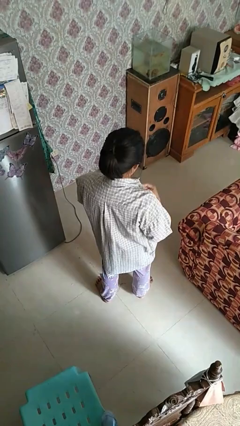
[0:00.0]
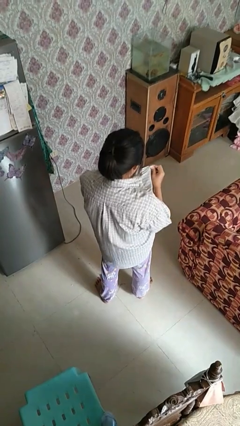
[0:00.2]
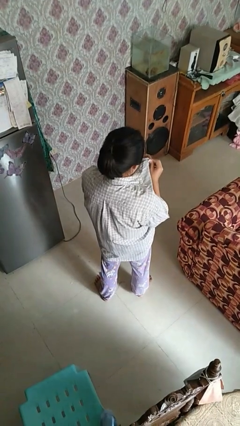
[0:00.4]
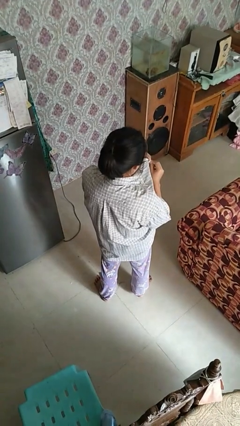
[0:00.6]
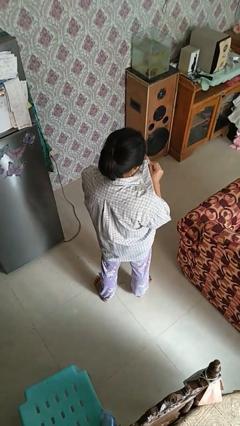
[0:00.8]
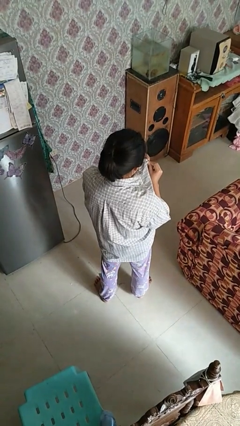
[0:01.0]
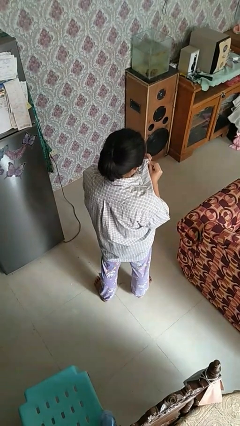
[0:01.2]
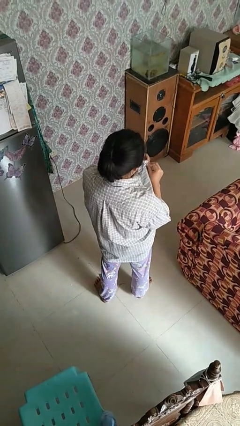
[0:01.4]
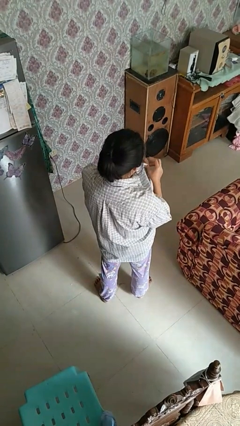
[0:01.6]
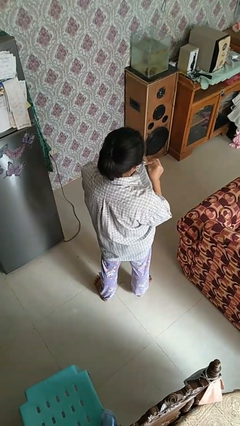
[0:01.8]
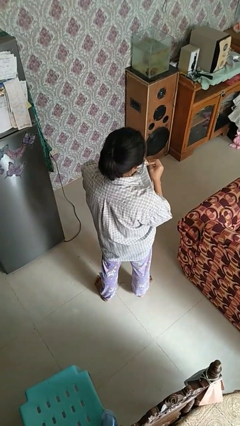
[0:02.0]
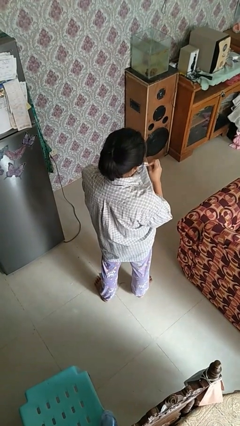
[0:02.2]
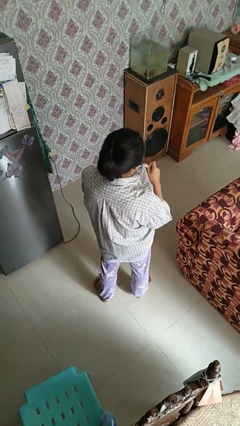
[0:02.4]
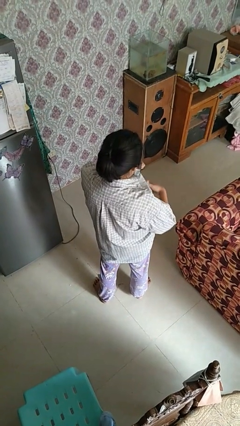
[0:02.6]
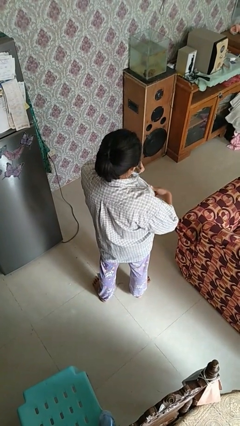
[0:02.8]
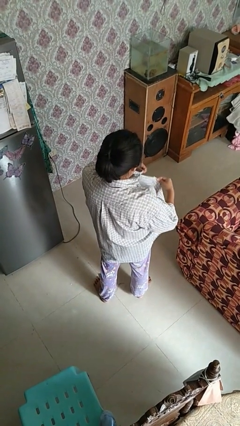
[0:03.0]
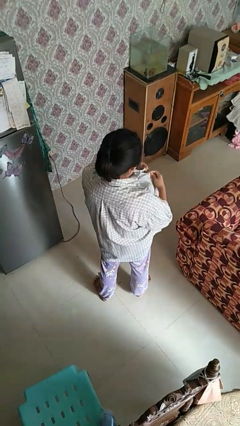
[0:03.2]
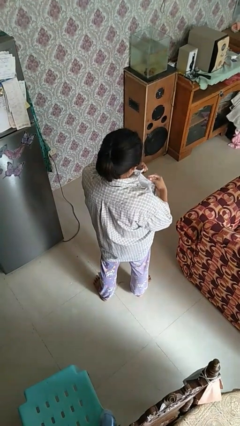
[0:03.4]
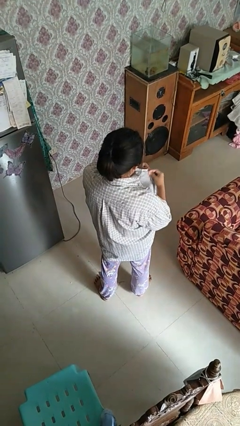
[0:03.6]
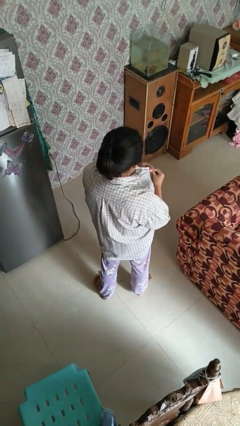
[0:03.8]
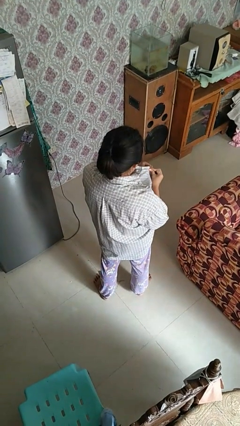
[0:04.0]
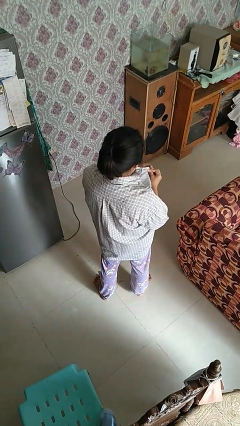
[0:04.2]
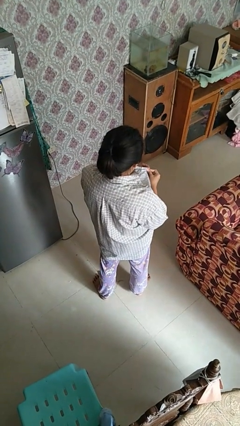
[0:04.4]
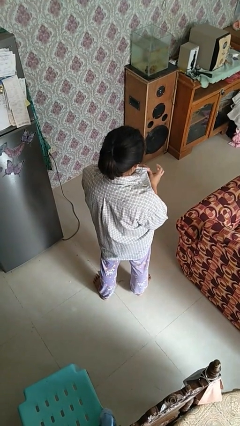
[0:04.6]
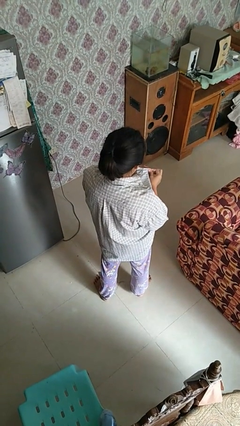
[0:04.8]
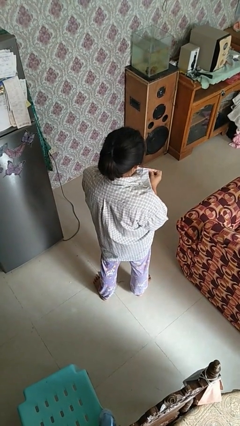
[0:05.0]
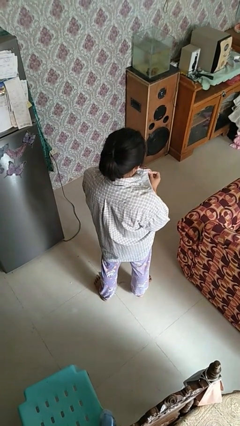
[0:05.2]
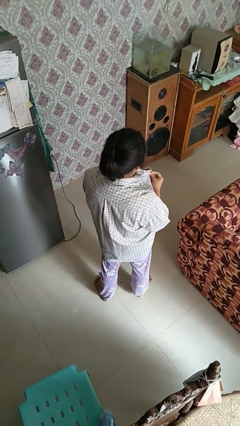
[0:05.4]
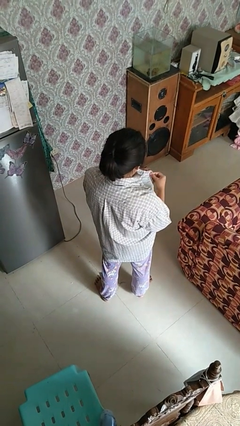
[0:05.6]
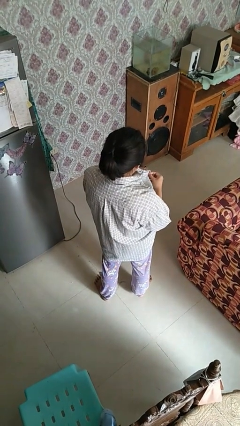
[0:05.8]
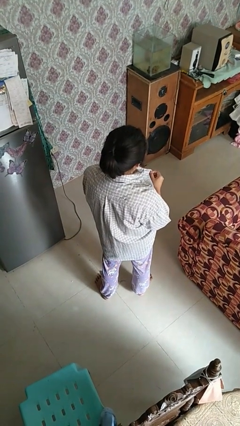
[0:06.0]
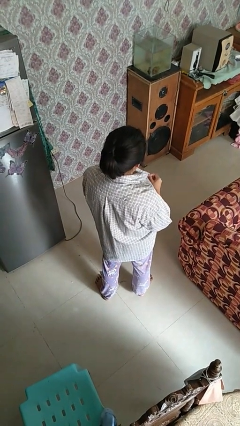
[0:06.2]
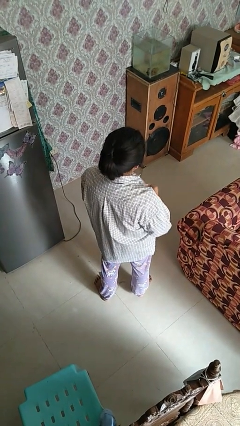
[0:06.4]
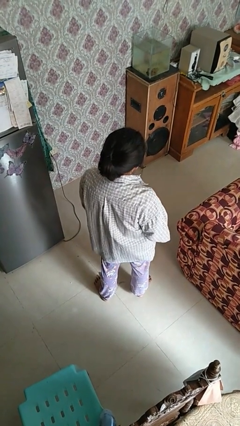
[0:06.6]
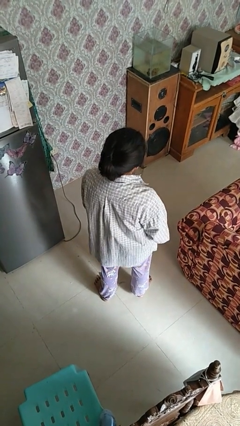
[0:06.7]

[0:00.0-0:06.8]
person buttons shirt

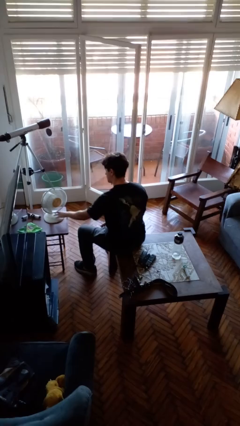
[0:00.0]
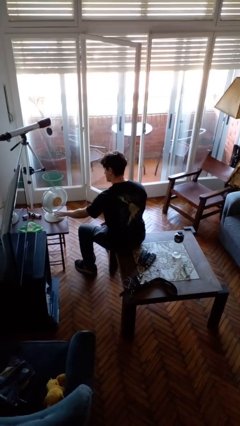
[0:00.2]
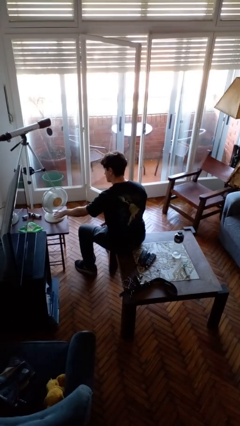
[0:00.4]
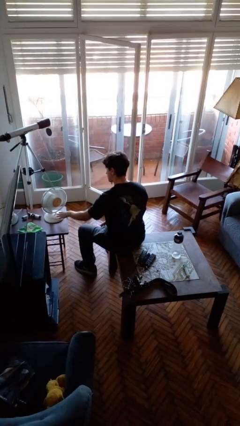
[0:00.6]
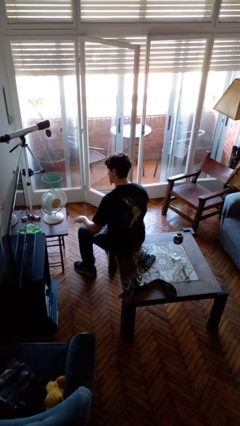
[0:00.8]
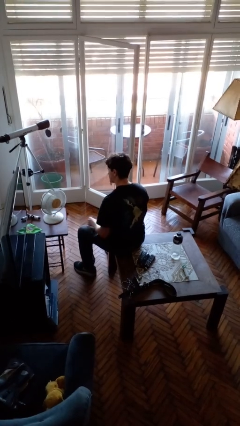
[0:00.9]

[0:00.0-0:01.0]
person turns off fan

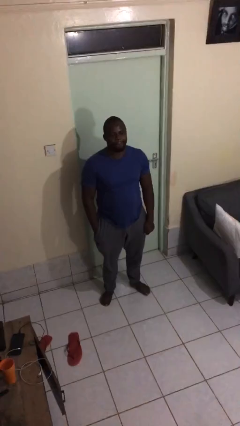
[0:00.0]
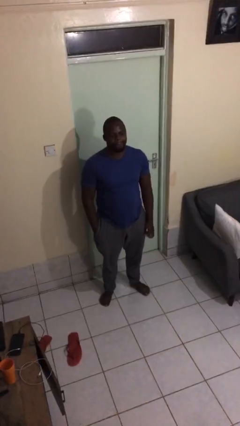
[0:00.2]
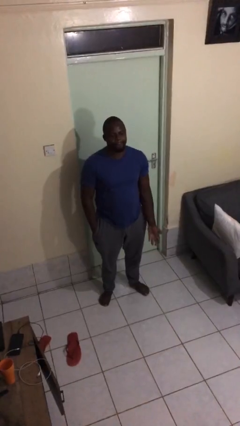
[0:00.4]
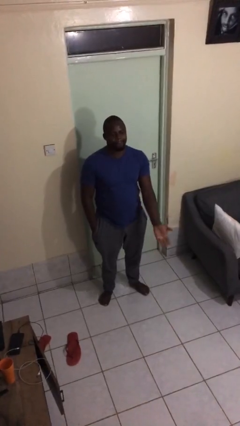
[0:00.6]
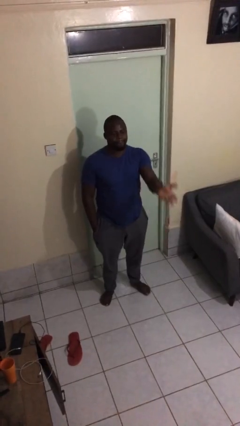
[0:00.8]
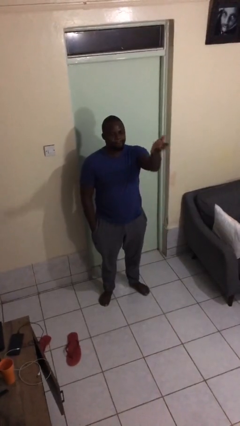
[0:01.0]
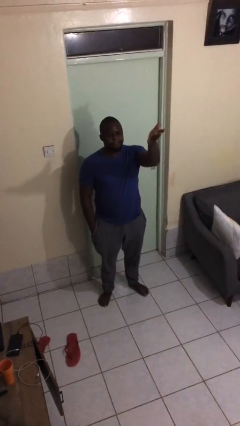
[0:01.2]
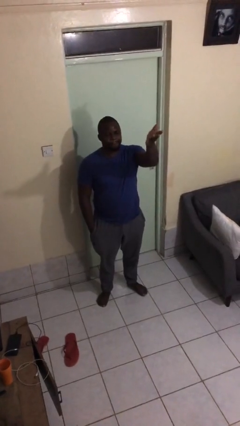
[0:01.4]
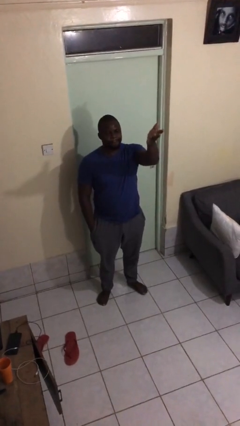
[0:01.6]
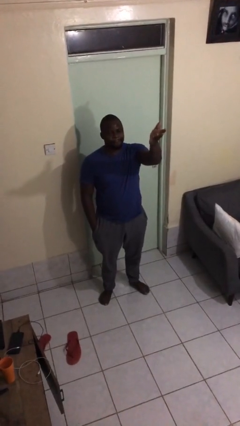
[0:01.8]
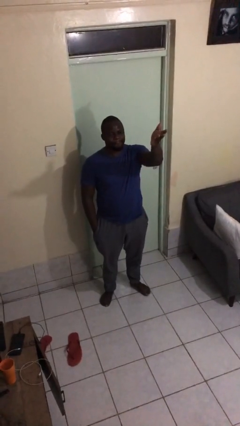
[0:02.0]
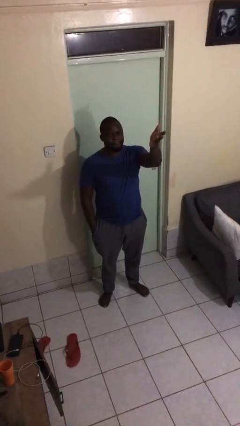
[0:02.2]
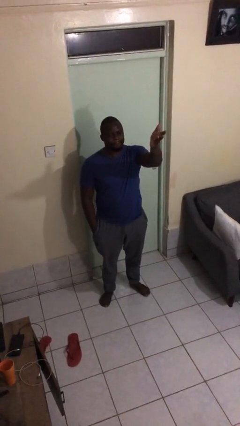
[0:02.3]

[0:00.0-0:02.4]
person gestures swipe up

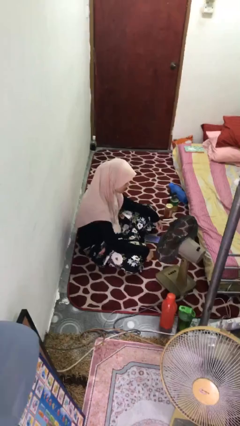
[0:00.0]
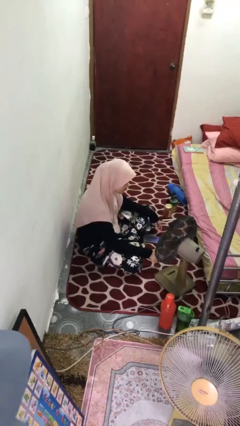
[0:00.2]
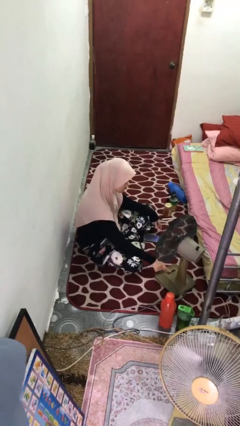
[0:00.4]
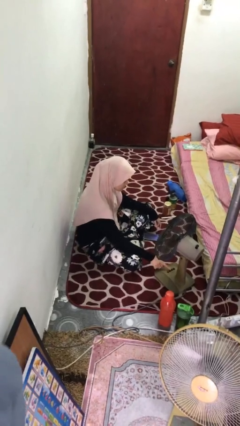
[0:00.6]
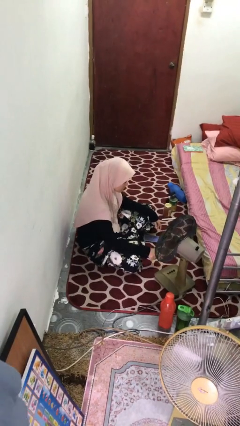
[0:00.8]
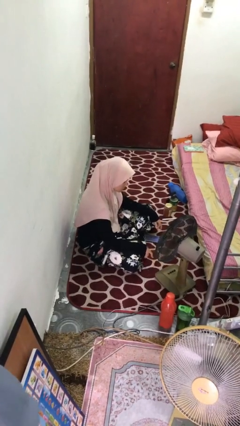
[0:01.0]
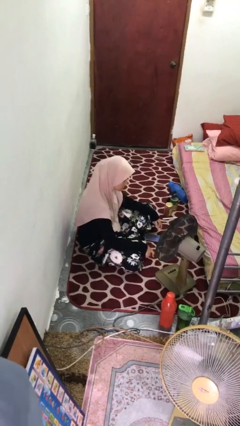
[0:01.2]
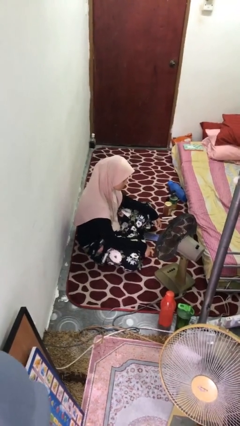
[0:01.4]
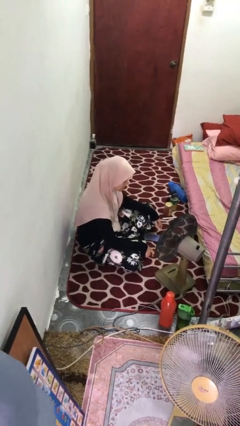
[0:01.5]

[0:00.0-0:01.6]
person turns on fan

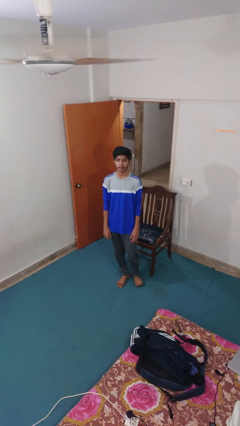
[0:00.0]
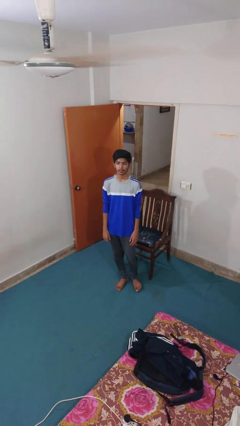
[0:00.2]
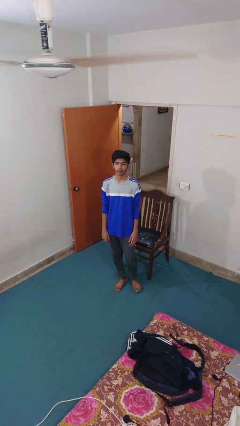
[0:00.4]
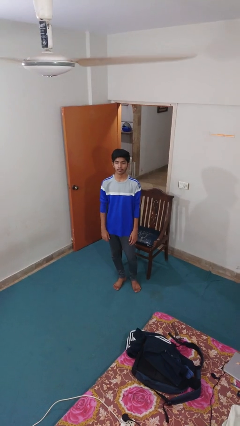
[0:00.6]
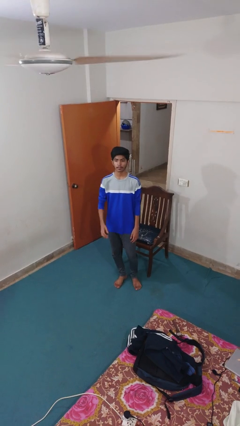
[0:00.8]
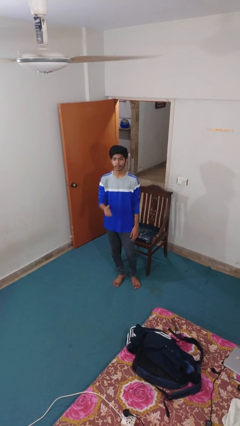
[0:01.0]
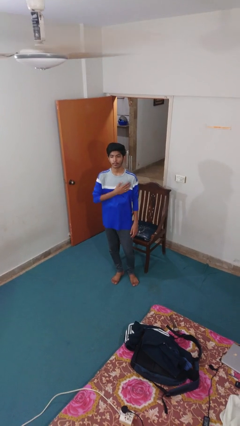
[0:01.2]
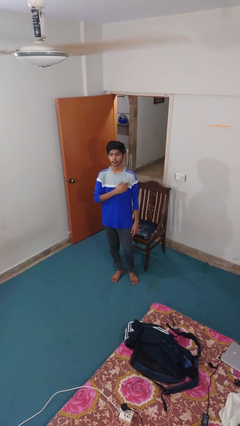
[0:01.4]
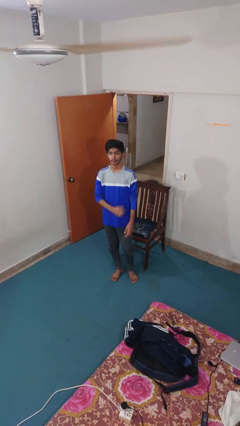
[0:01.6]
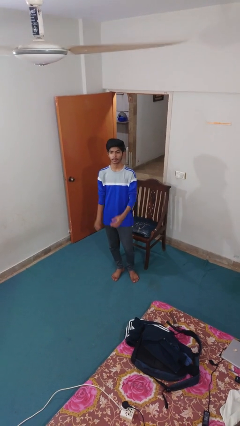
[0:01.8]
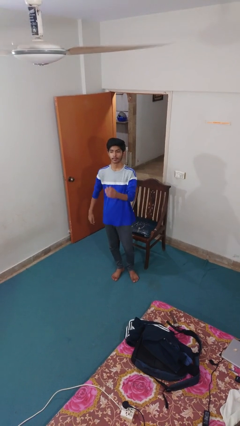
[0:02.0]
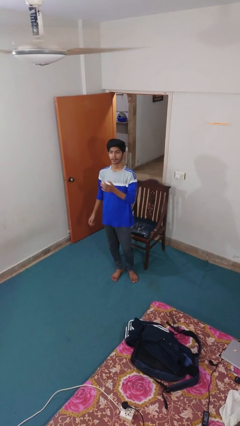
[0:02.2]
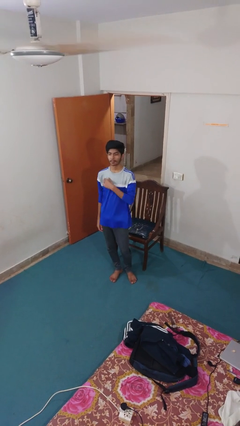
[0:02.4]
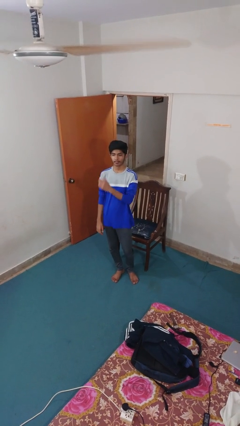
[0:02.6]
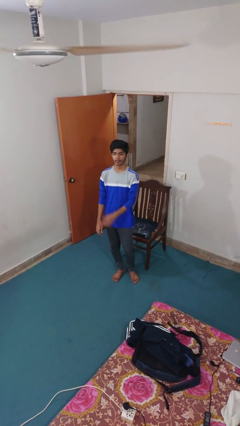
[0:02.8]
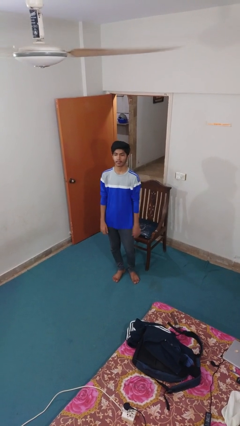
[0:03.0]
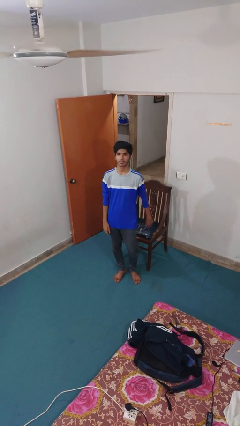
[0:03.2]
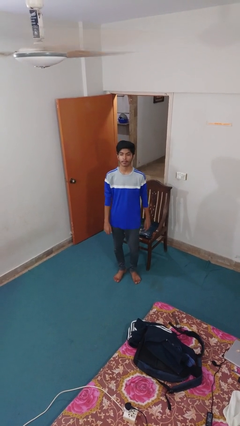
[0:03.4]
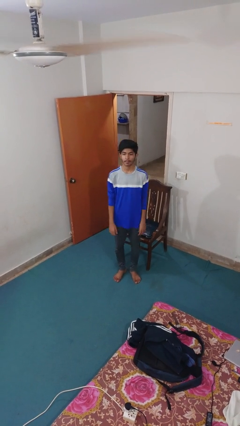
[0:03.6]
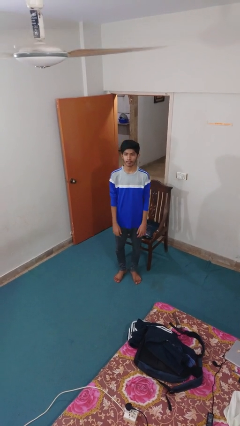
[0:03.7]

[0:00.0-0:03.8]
person drums on chest

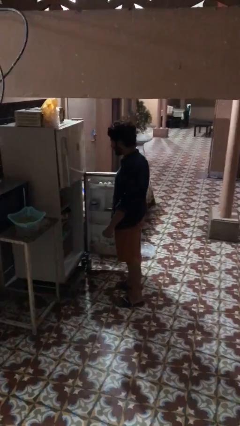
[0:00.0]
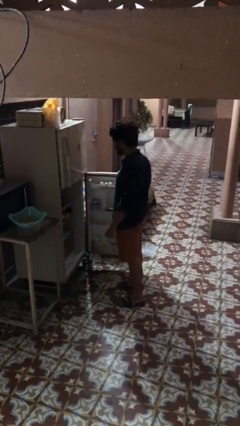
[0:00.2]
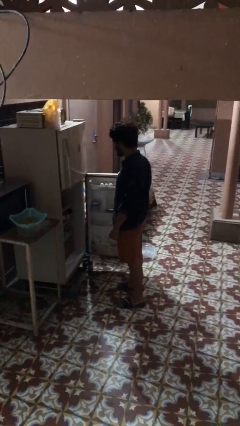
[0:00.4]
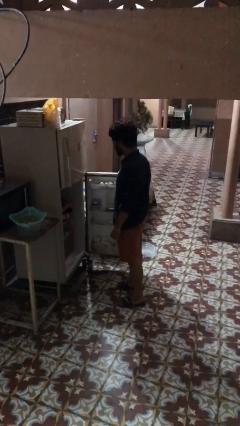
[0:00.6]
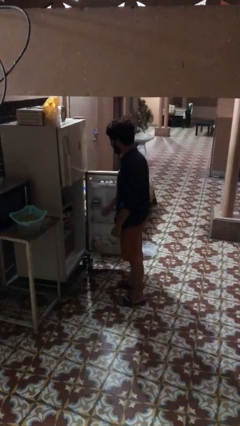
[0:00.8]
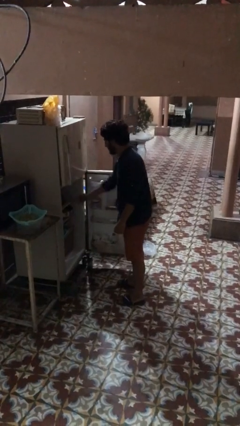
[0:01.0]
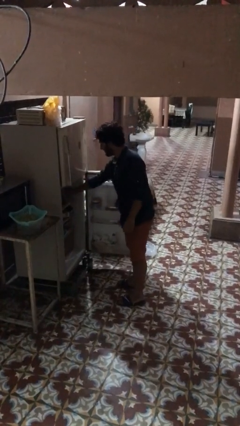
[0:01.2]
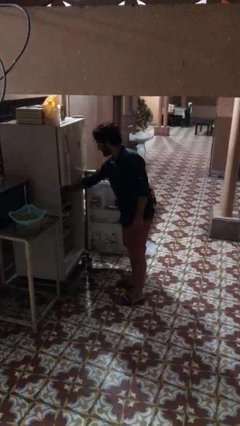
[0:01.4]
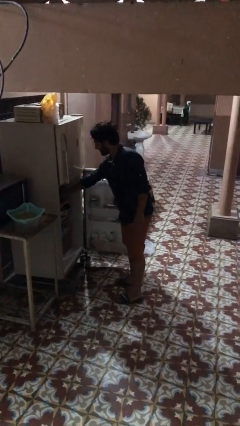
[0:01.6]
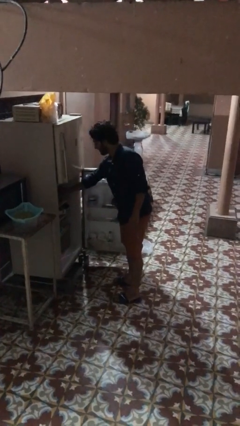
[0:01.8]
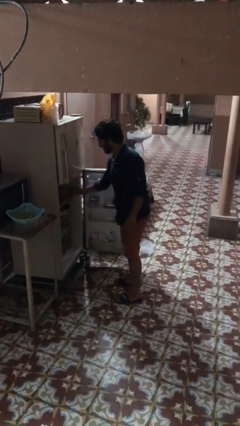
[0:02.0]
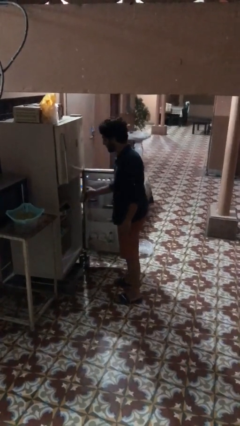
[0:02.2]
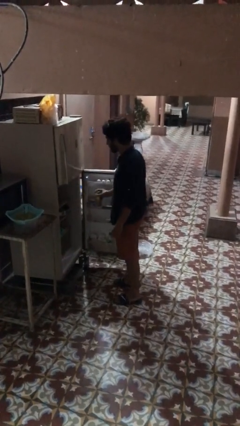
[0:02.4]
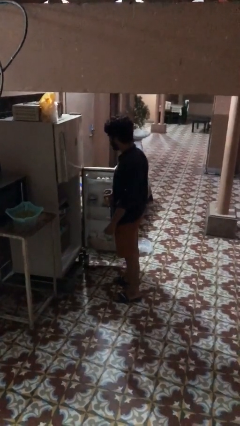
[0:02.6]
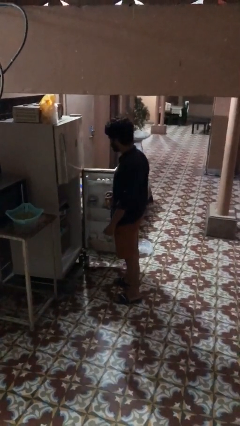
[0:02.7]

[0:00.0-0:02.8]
person takes object from refrigerator
